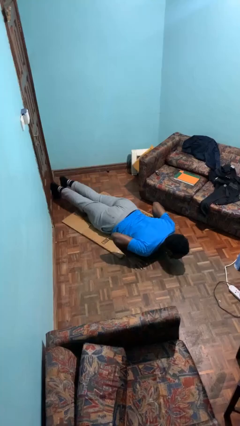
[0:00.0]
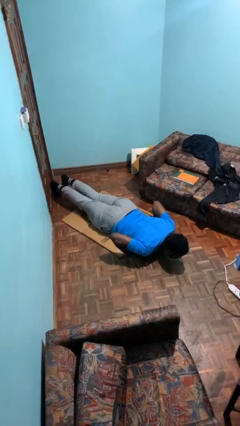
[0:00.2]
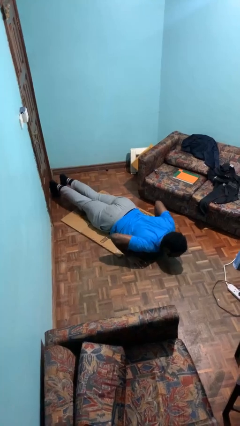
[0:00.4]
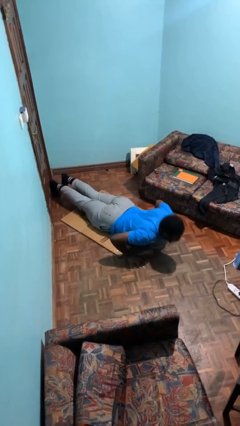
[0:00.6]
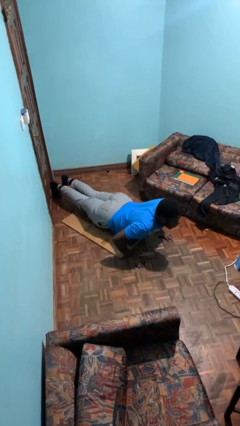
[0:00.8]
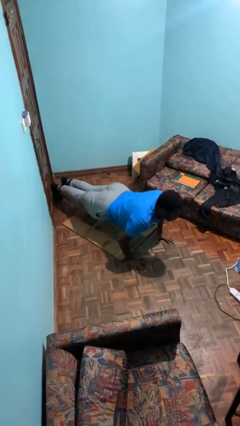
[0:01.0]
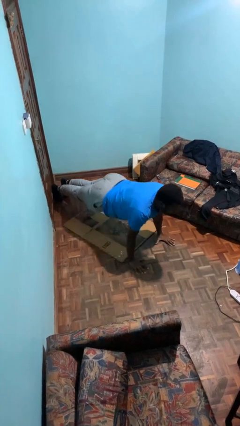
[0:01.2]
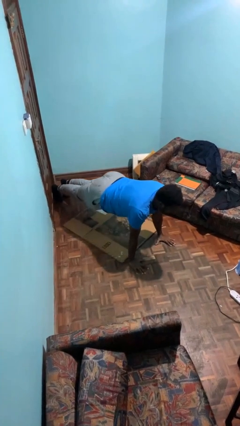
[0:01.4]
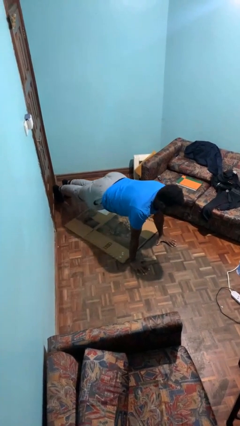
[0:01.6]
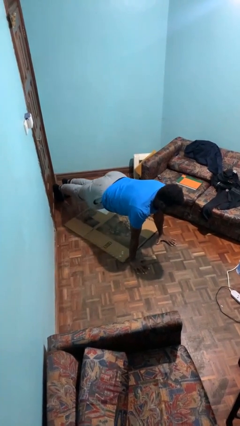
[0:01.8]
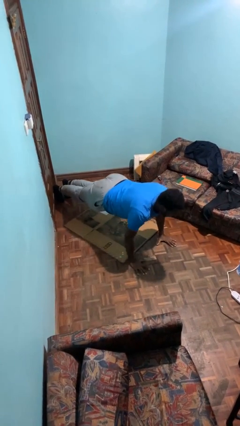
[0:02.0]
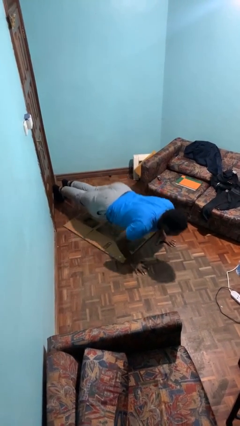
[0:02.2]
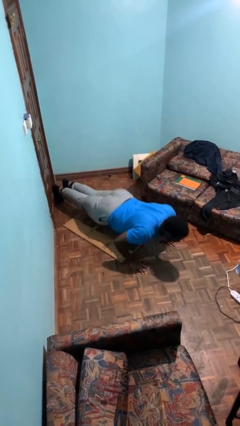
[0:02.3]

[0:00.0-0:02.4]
person exercises with pushup

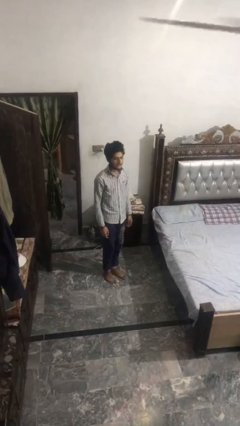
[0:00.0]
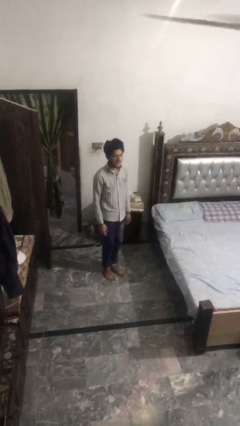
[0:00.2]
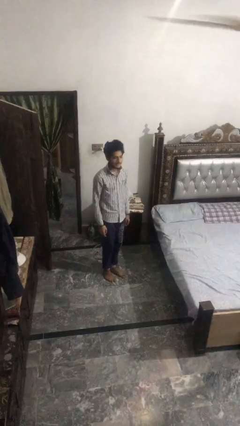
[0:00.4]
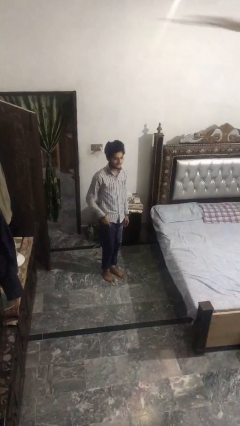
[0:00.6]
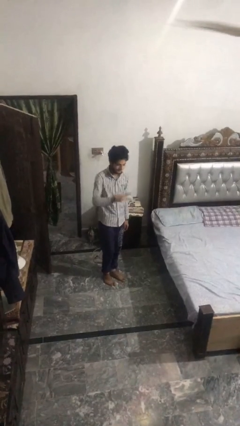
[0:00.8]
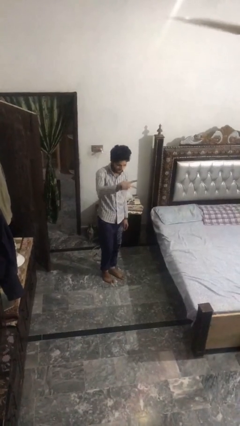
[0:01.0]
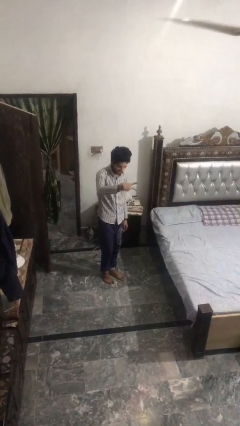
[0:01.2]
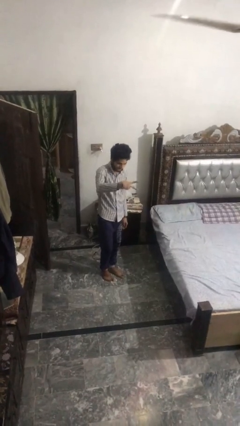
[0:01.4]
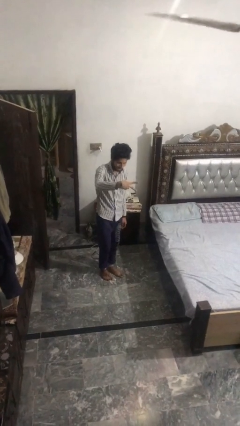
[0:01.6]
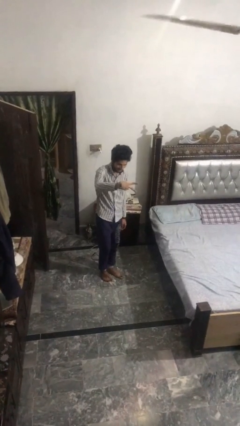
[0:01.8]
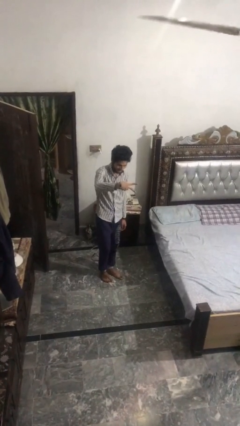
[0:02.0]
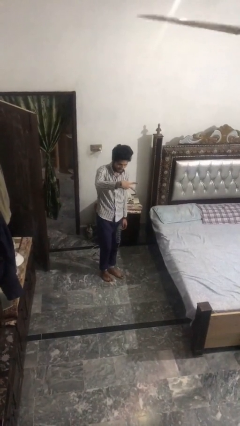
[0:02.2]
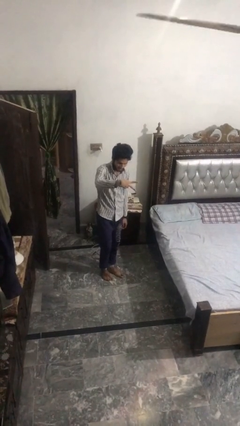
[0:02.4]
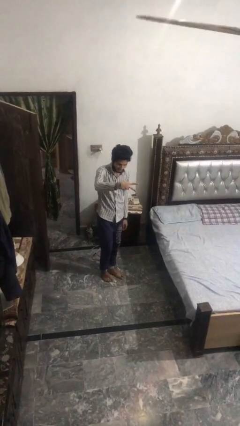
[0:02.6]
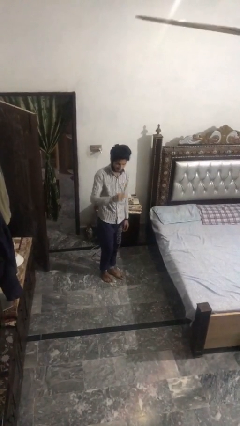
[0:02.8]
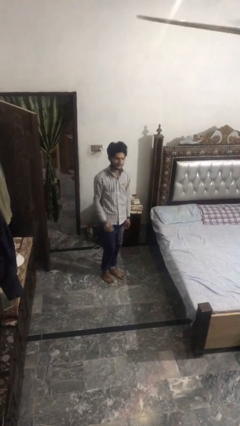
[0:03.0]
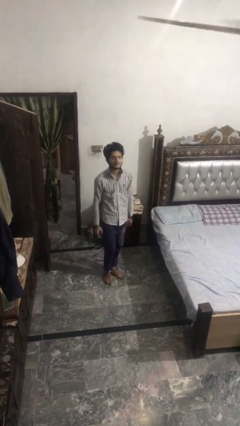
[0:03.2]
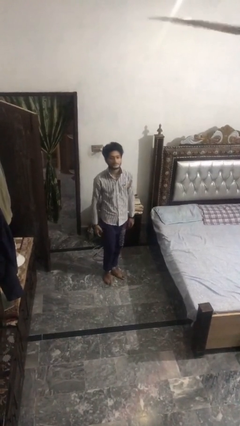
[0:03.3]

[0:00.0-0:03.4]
person gestures peace

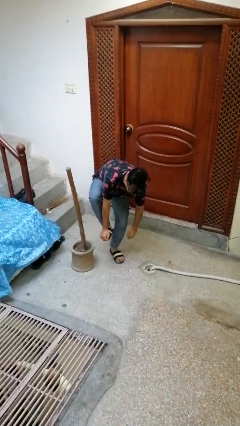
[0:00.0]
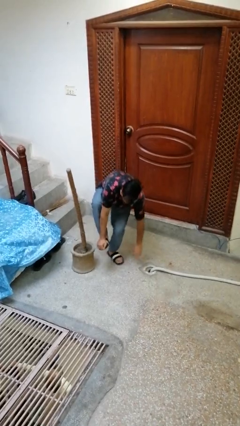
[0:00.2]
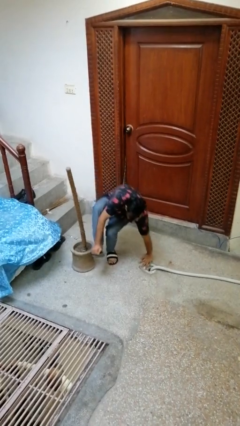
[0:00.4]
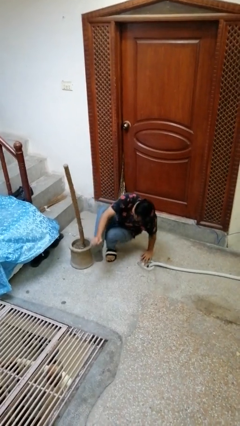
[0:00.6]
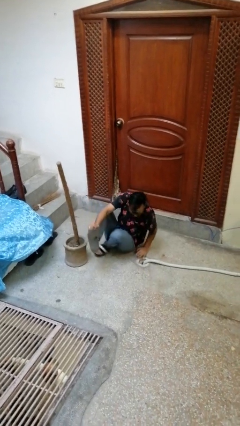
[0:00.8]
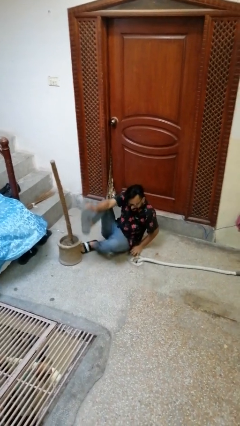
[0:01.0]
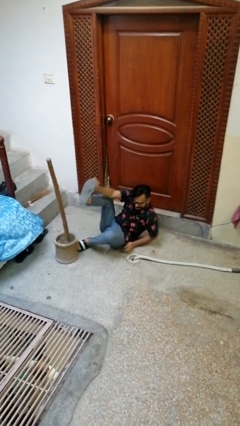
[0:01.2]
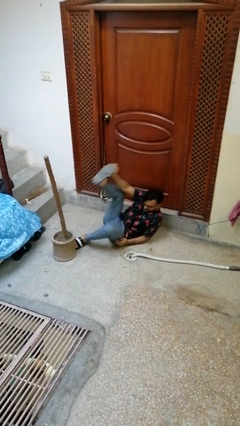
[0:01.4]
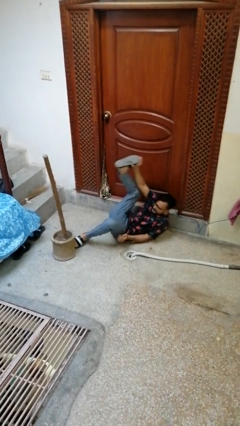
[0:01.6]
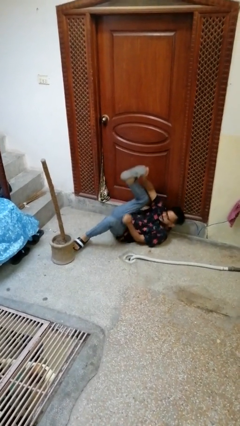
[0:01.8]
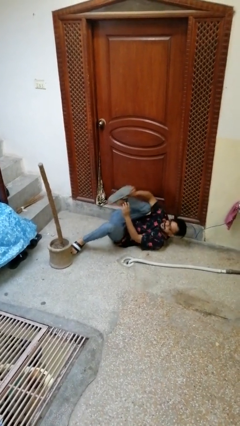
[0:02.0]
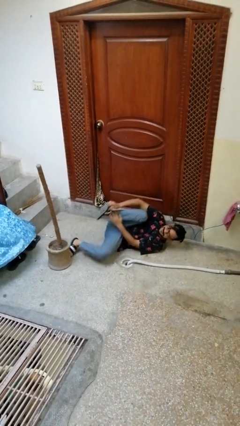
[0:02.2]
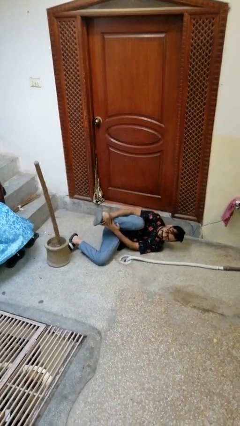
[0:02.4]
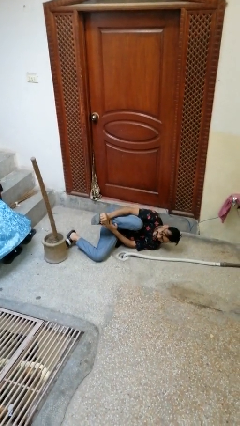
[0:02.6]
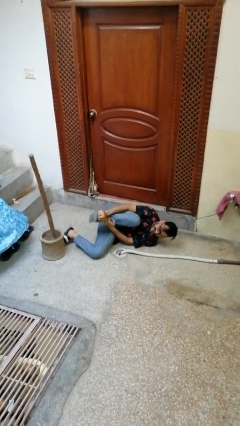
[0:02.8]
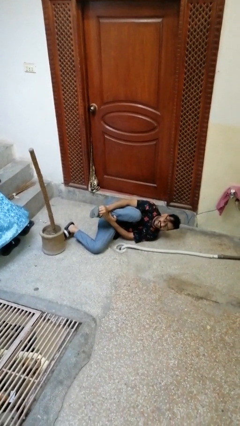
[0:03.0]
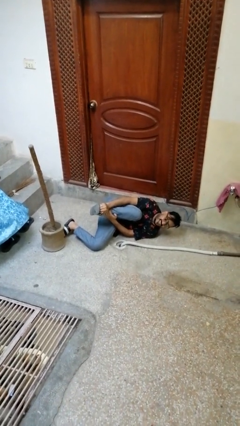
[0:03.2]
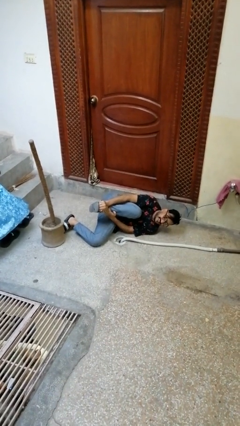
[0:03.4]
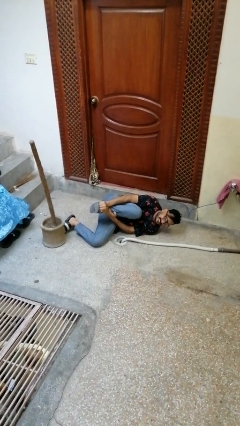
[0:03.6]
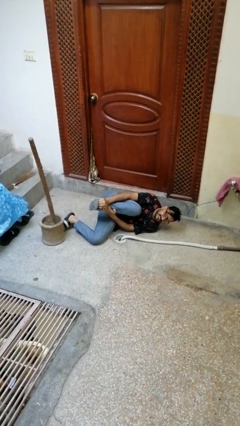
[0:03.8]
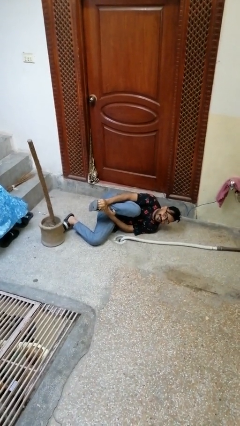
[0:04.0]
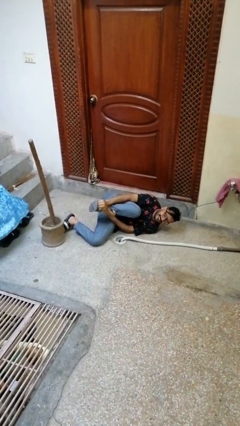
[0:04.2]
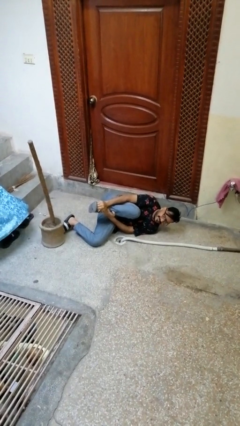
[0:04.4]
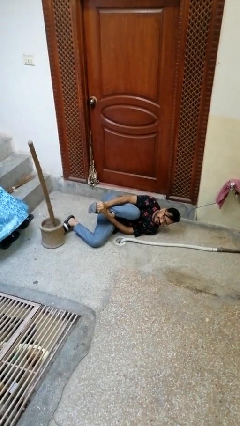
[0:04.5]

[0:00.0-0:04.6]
person lies down on floor

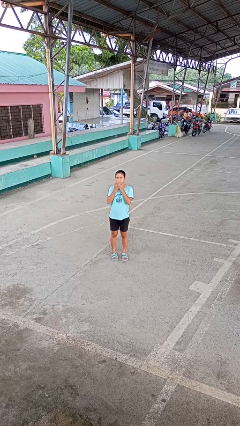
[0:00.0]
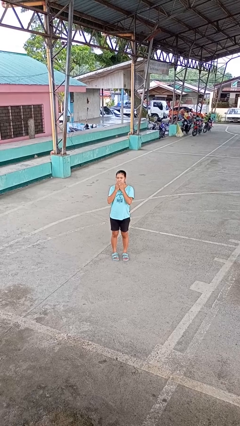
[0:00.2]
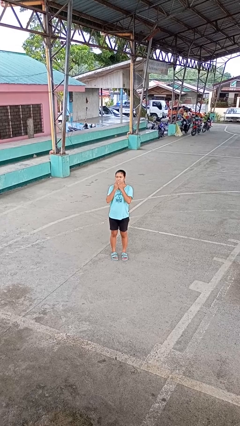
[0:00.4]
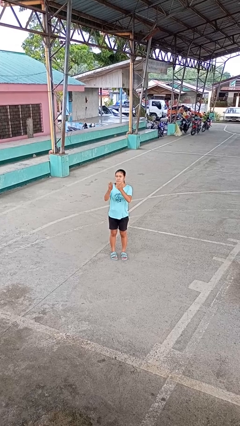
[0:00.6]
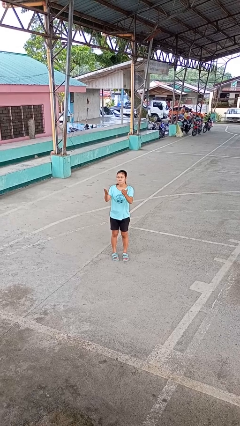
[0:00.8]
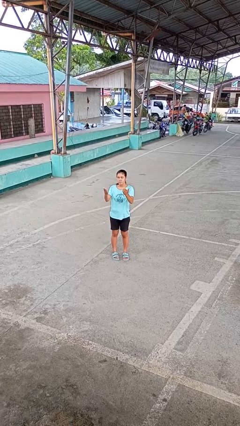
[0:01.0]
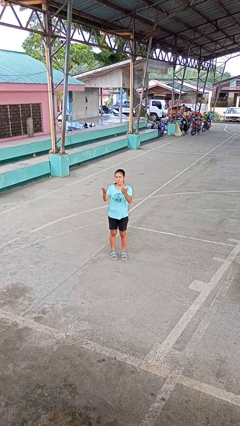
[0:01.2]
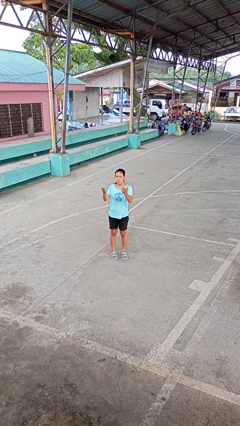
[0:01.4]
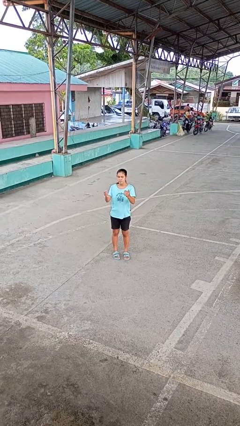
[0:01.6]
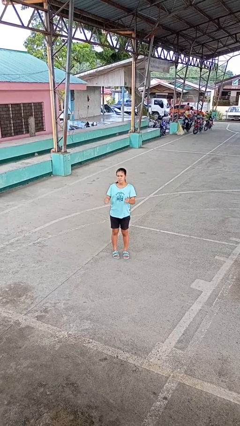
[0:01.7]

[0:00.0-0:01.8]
person gestures blow kiss

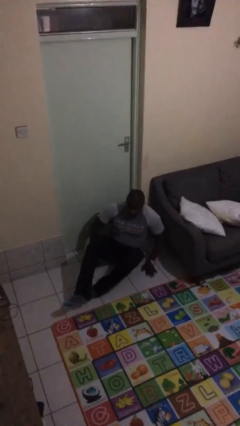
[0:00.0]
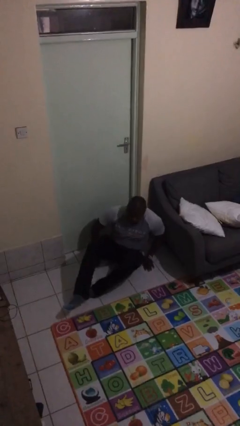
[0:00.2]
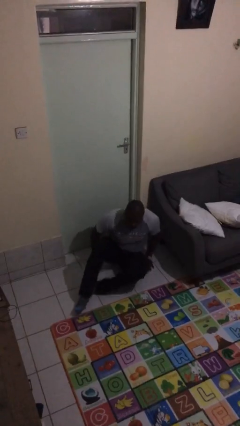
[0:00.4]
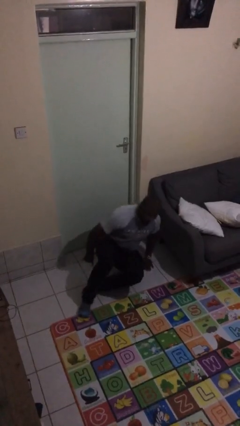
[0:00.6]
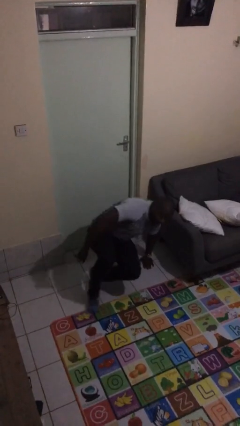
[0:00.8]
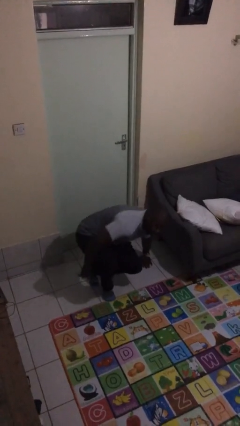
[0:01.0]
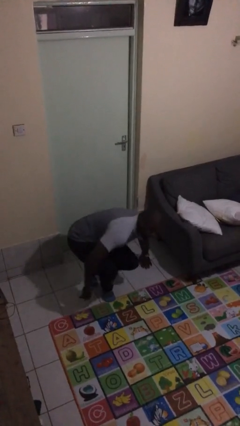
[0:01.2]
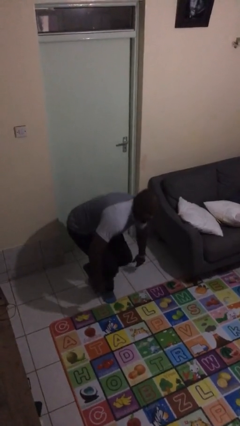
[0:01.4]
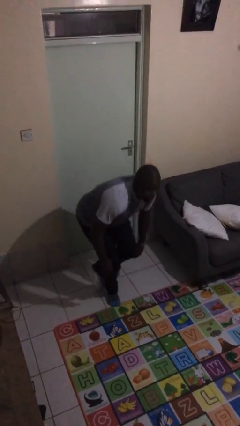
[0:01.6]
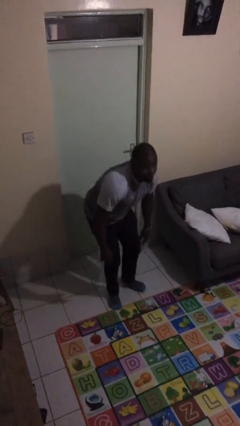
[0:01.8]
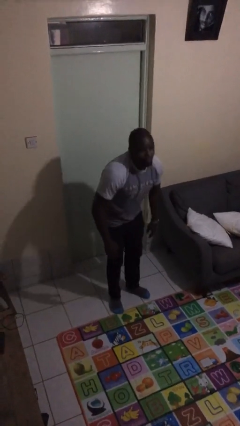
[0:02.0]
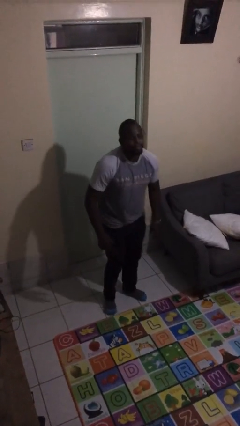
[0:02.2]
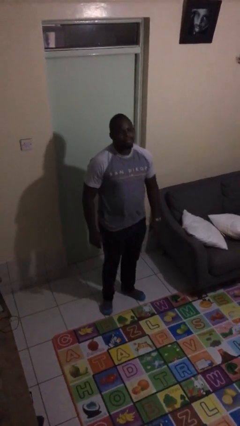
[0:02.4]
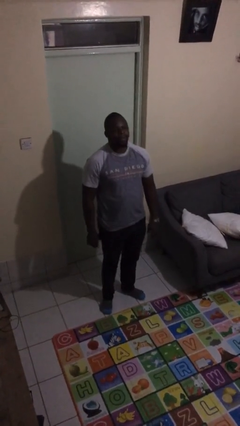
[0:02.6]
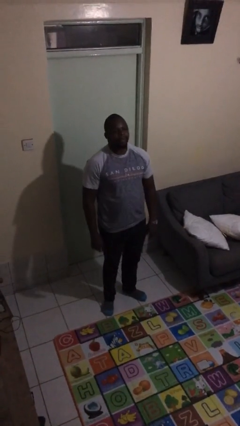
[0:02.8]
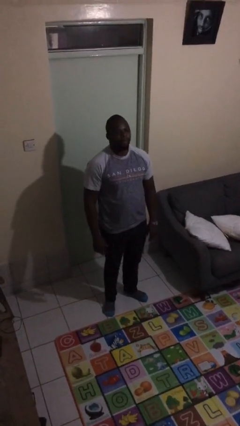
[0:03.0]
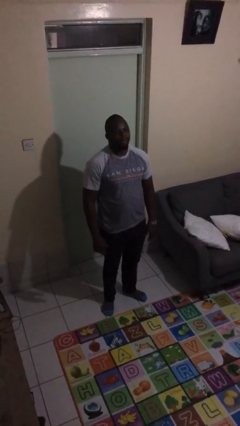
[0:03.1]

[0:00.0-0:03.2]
person stands up from floor

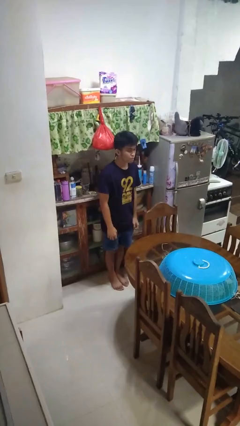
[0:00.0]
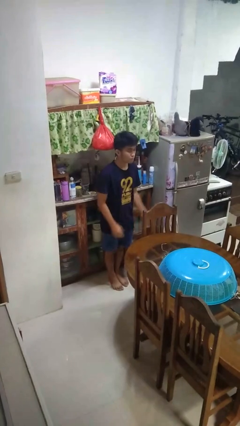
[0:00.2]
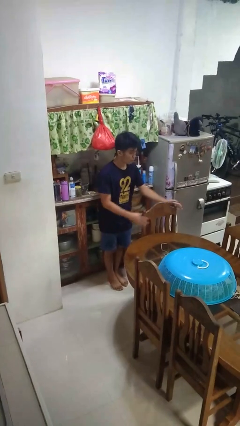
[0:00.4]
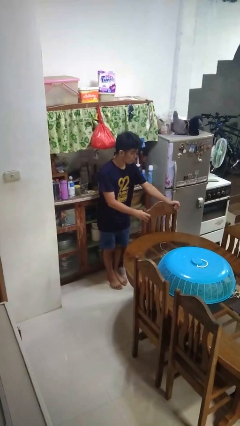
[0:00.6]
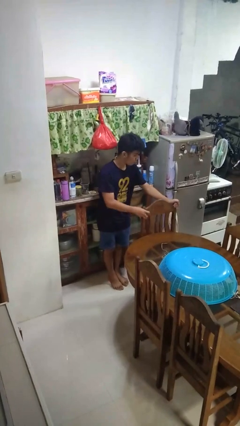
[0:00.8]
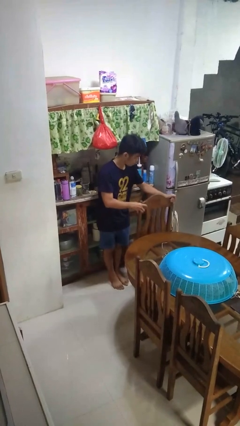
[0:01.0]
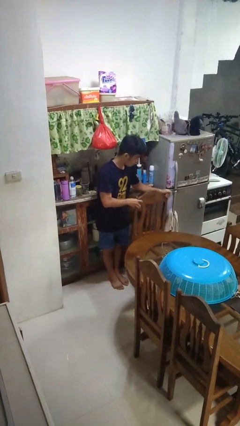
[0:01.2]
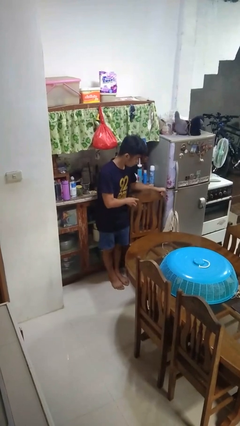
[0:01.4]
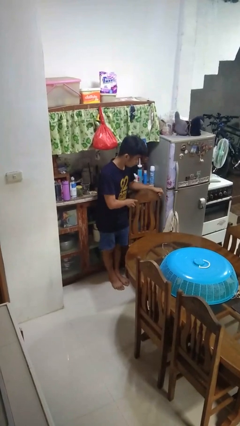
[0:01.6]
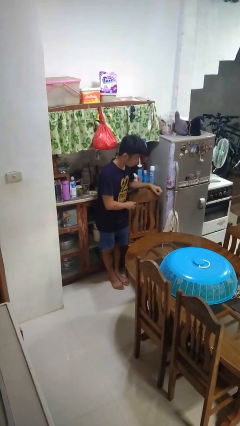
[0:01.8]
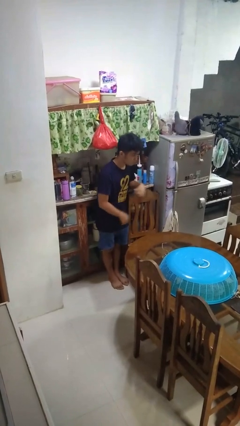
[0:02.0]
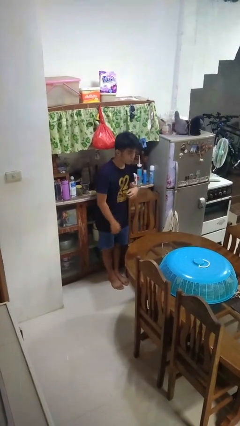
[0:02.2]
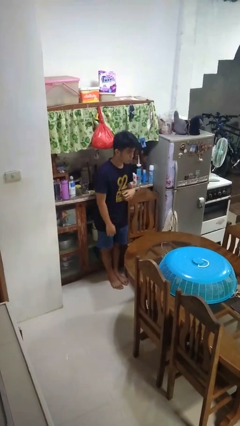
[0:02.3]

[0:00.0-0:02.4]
person pulls out chair
